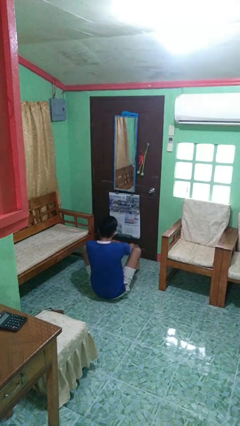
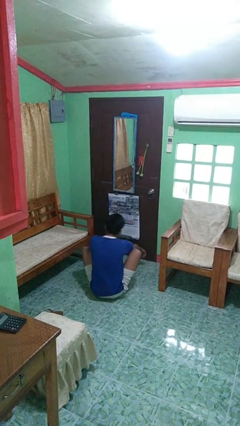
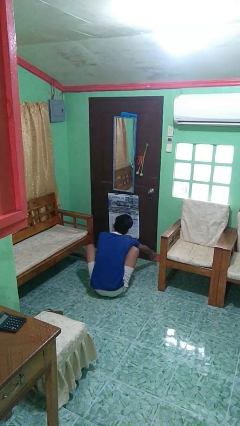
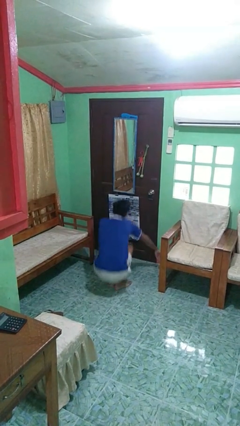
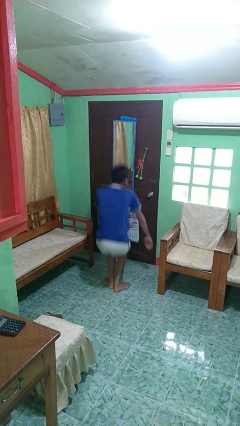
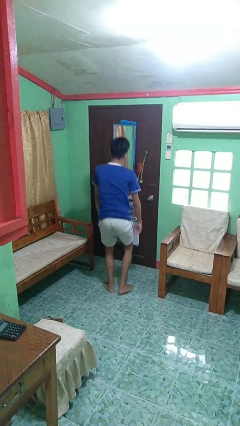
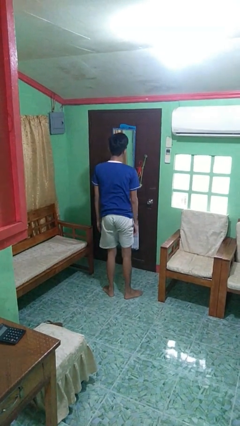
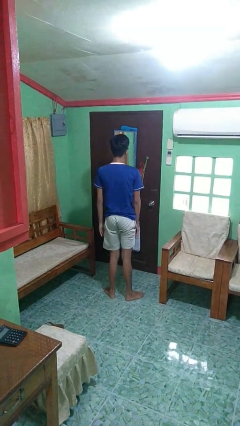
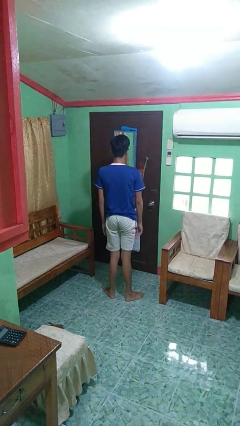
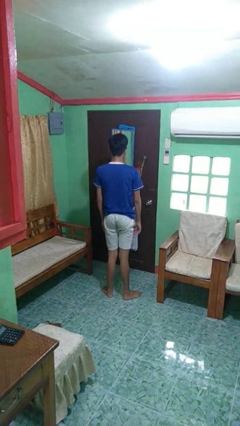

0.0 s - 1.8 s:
person stands up from floor

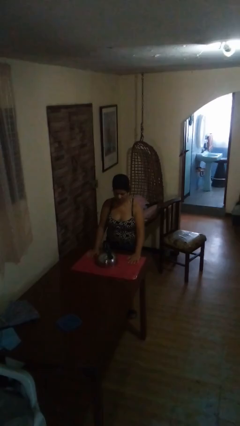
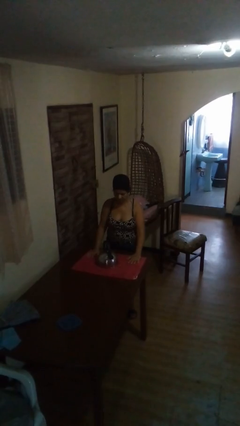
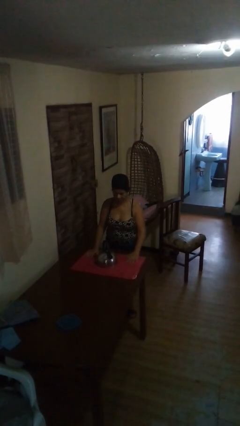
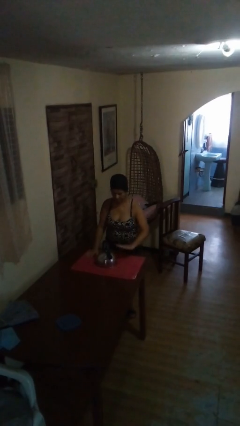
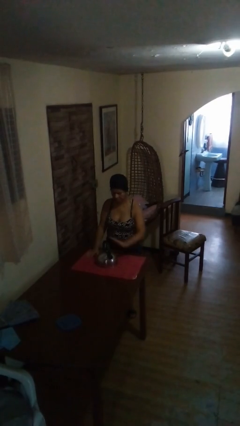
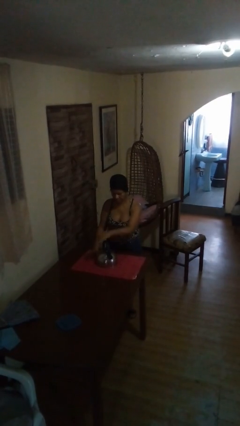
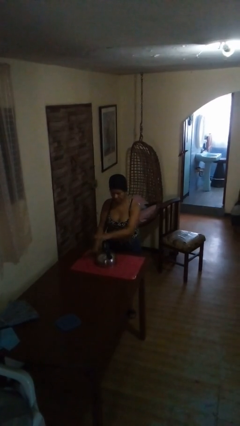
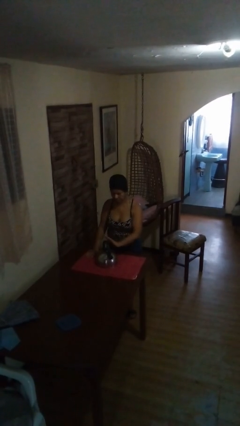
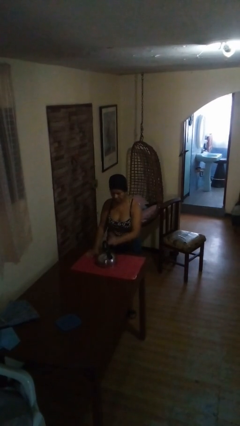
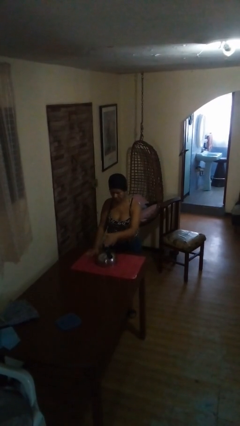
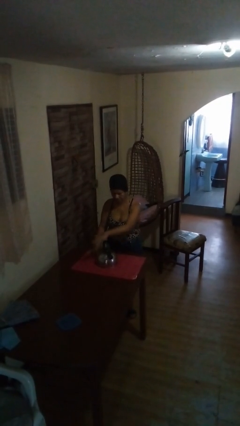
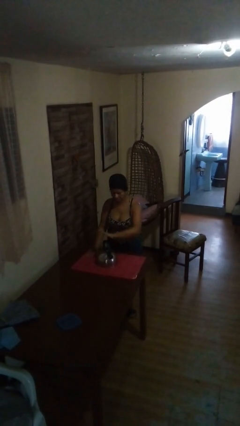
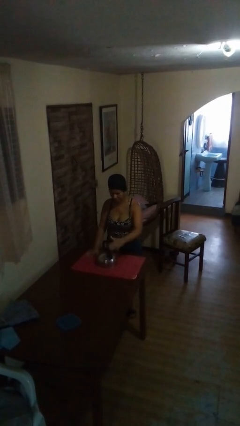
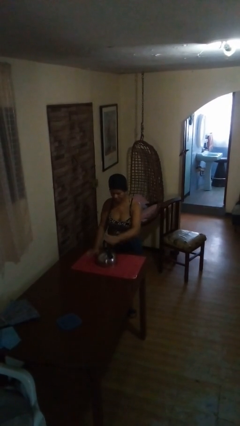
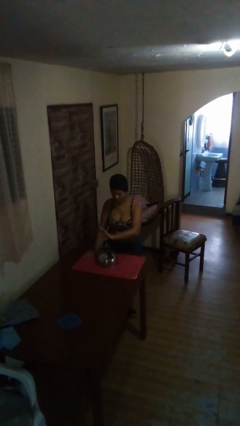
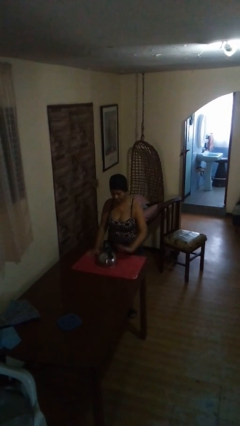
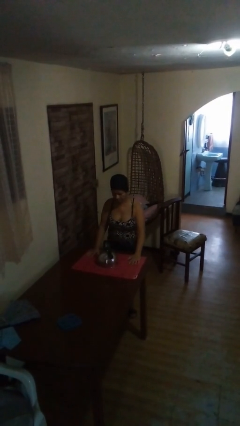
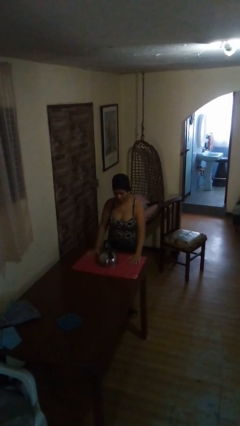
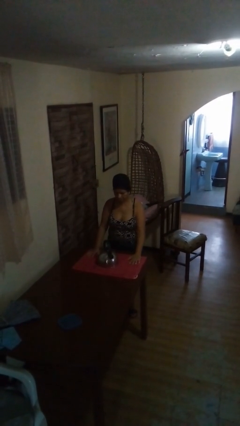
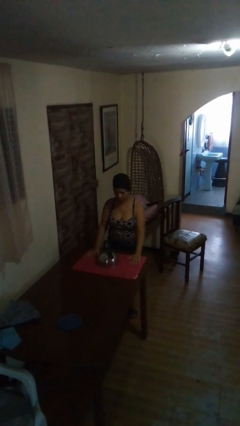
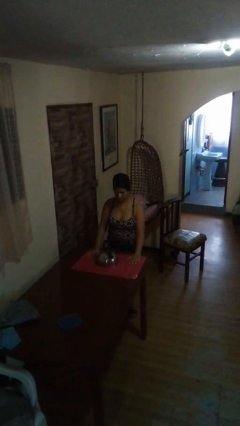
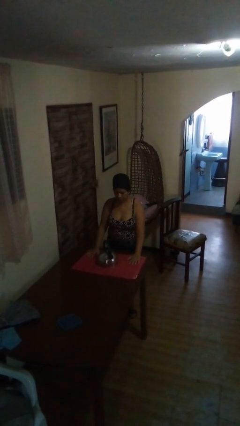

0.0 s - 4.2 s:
person waves hand over object

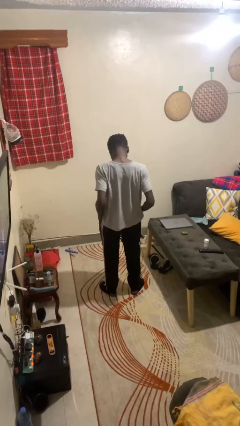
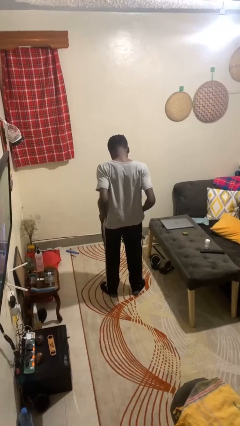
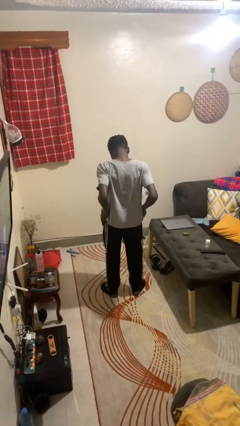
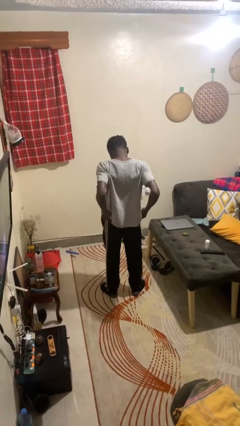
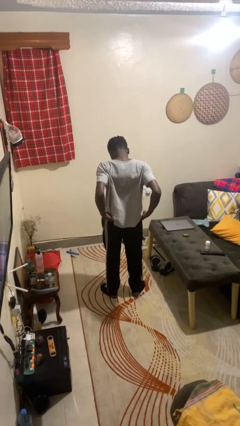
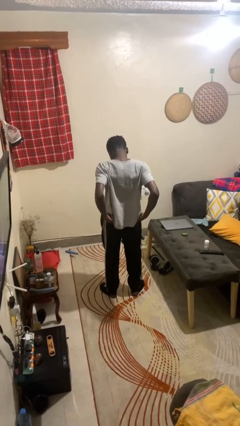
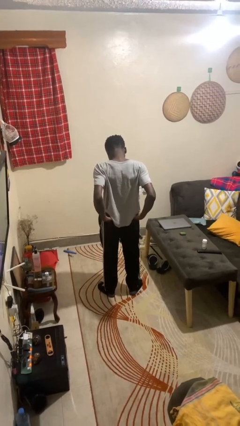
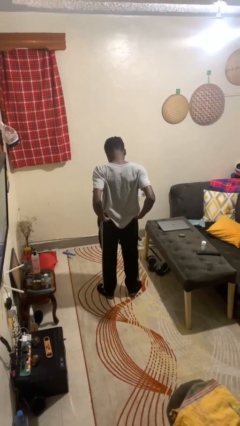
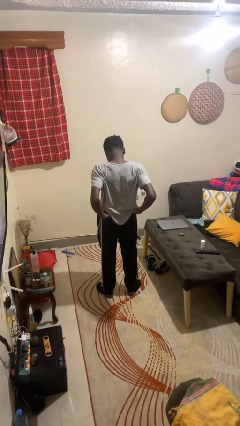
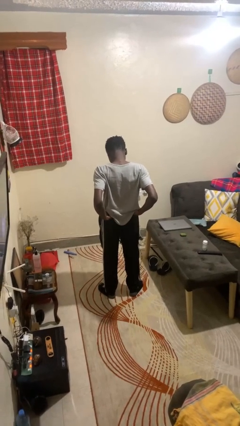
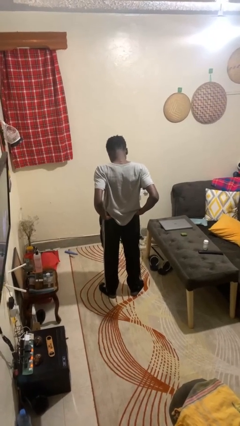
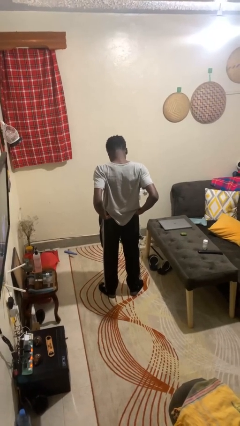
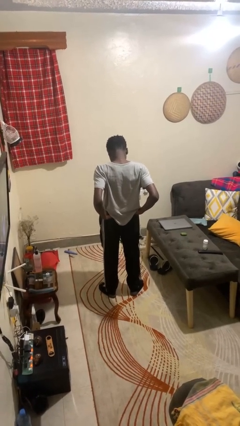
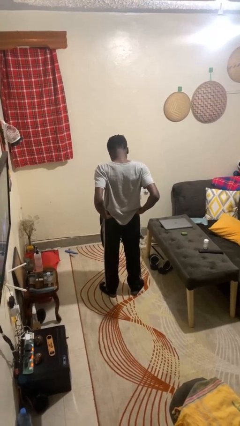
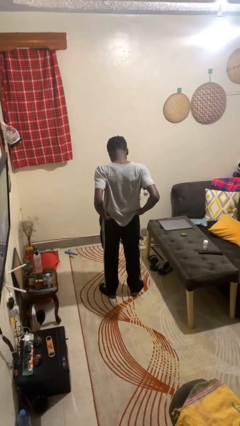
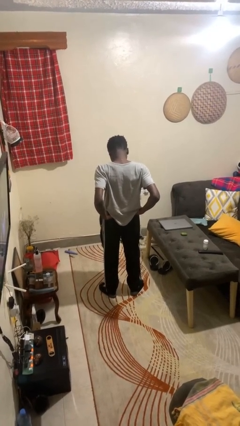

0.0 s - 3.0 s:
person puts hands in back pockets

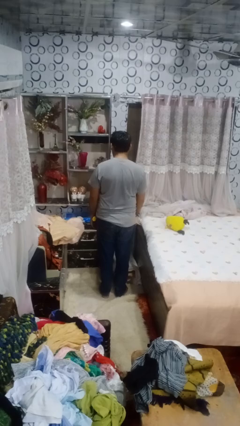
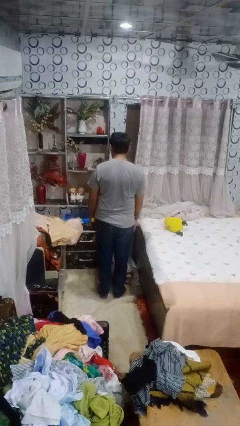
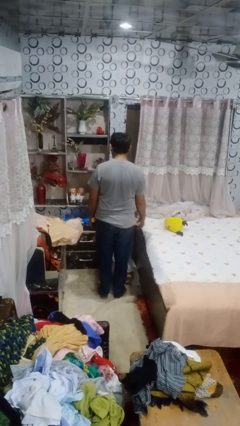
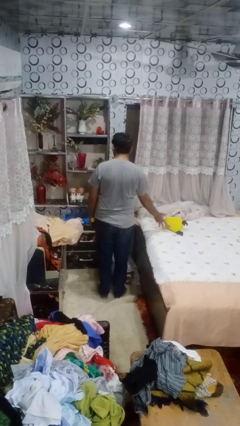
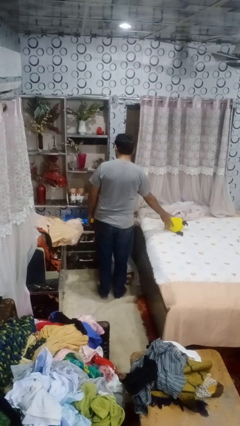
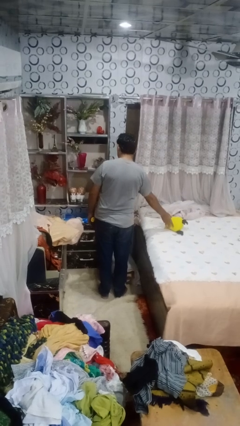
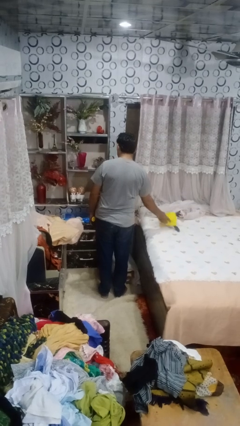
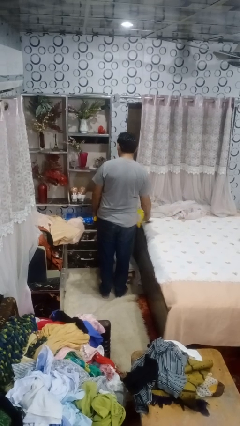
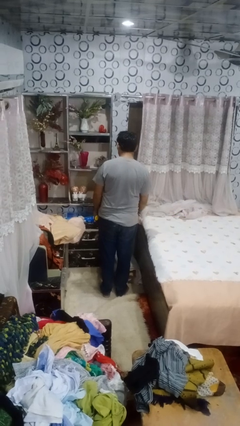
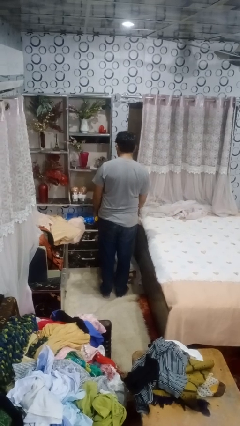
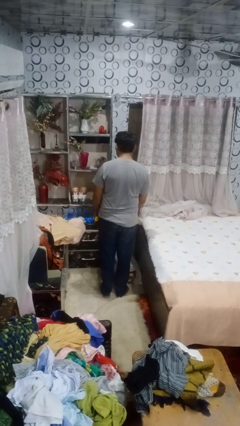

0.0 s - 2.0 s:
person picks up object from bed

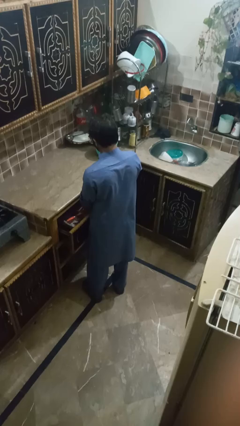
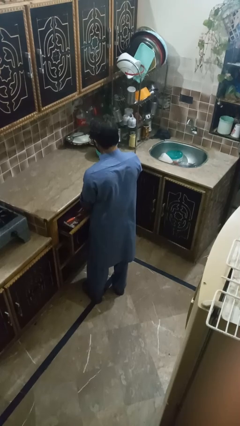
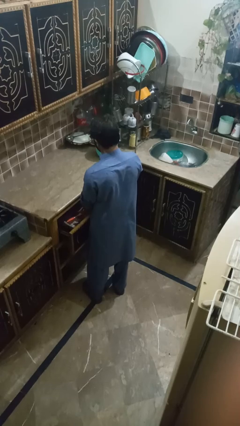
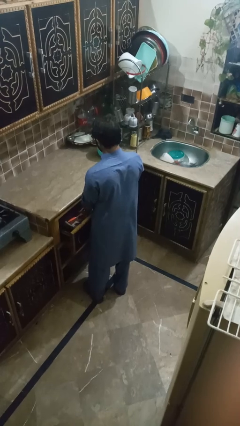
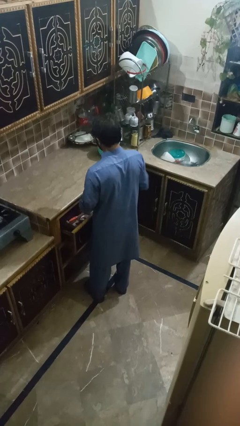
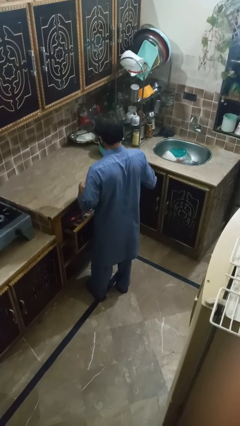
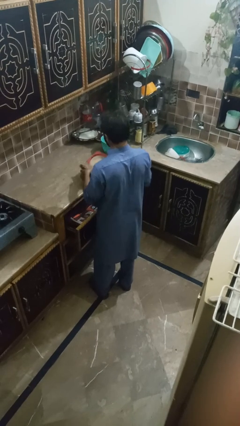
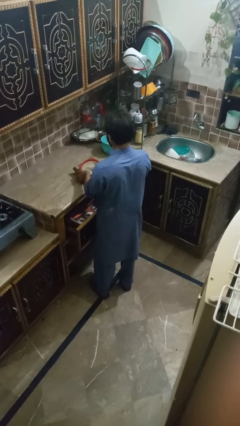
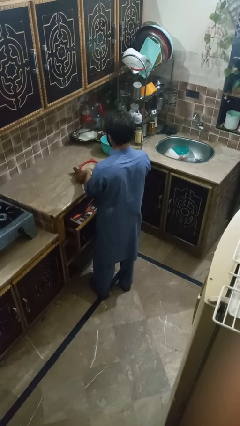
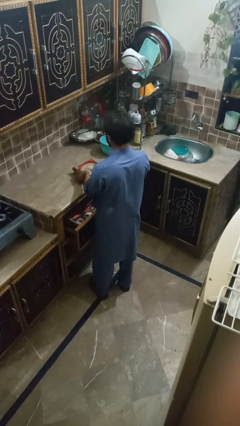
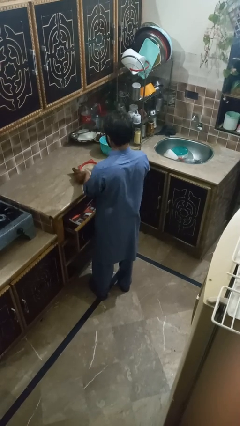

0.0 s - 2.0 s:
person takes object from kitchen drawer

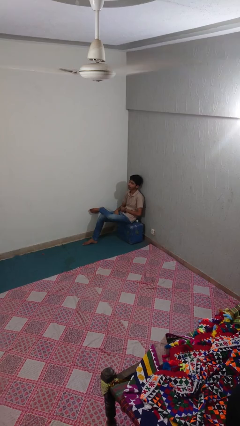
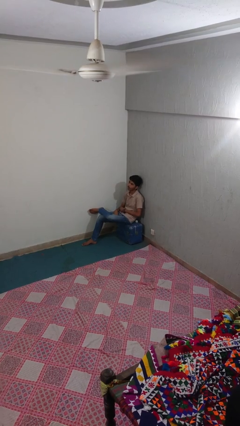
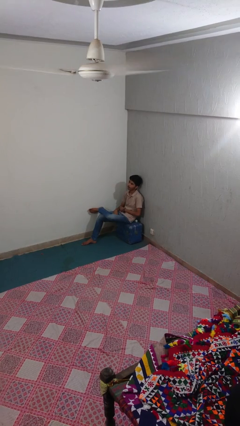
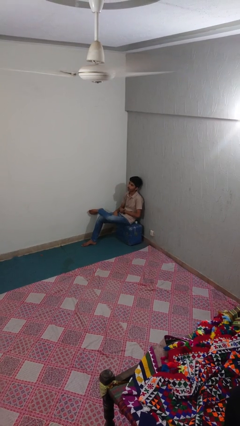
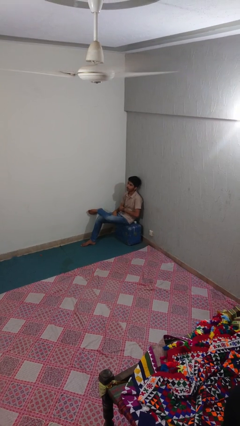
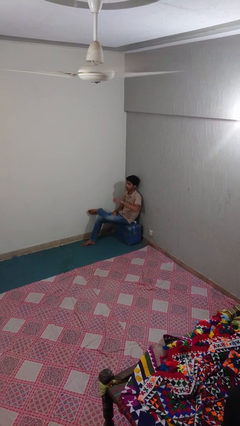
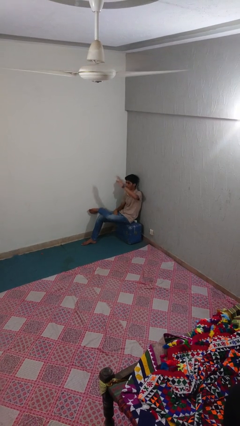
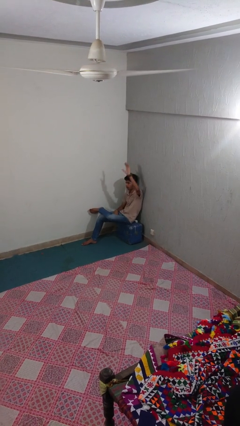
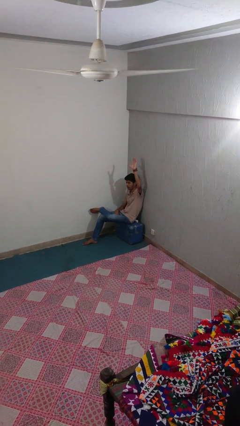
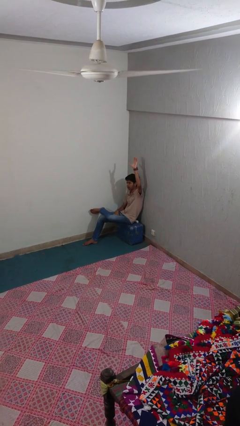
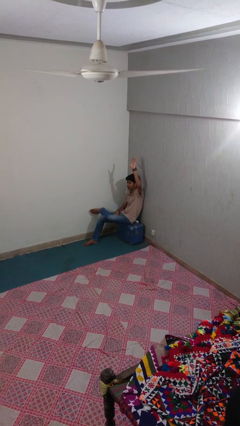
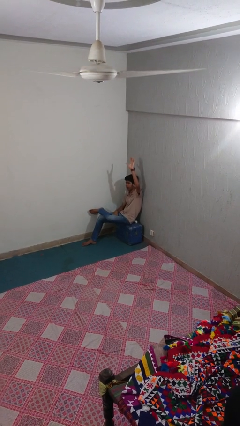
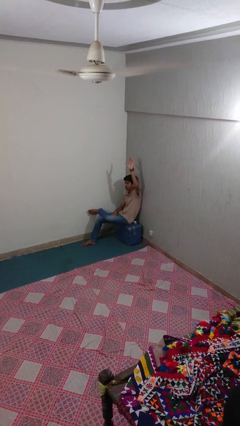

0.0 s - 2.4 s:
person gestures raise hand

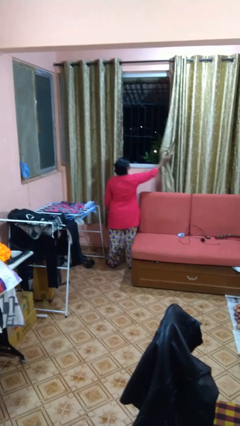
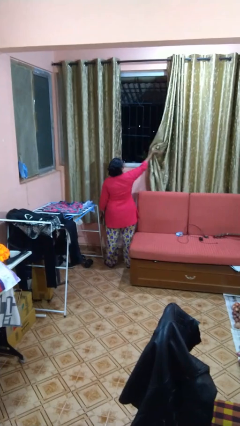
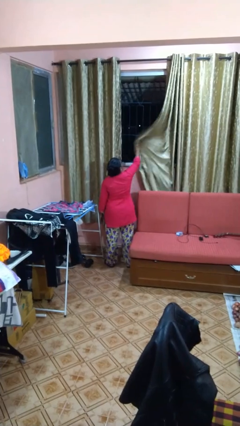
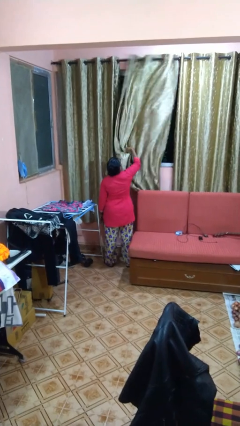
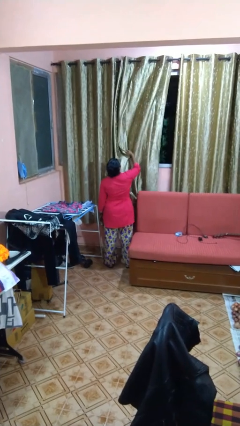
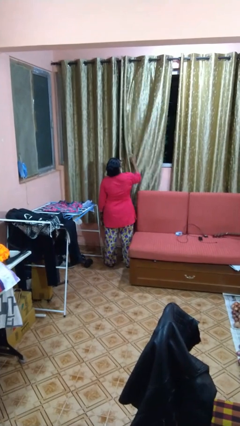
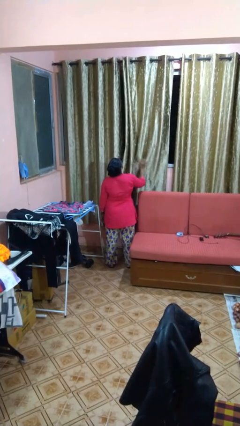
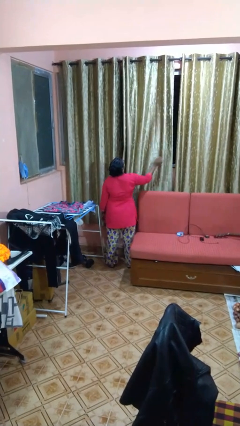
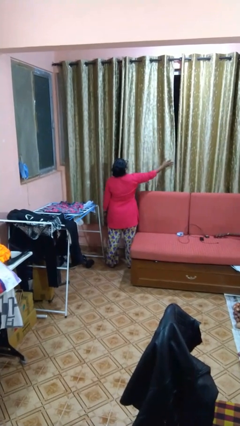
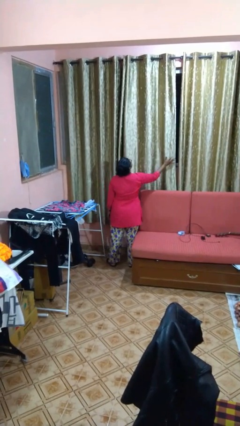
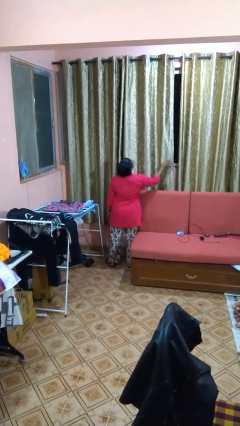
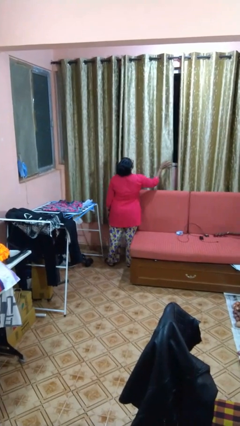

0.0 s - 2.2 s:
person closes curtains
